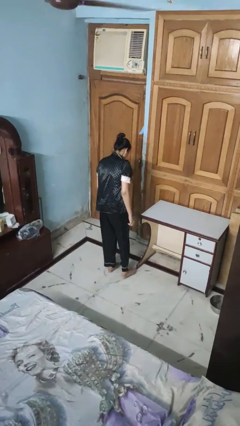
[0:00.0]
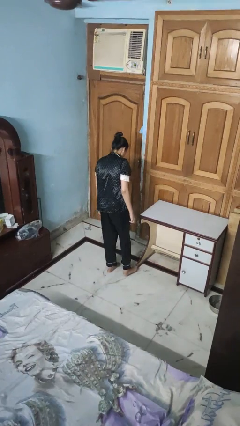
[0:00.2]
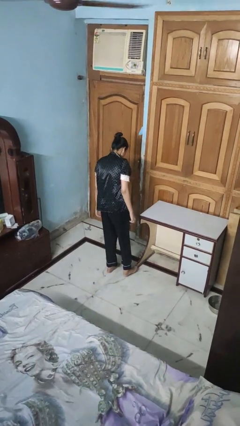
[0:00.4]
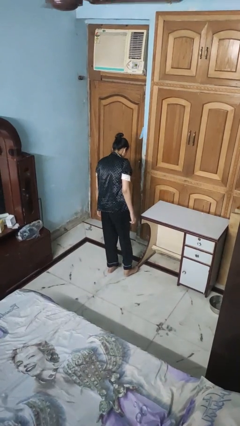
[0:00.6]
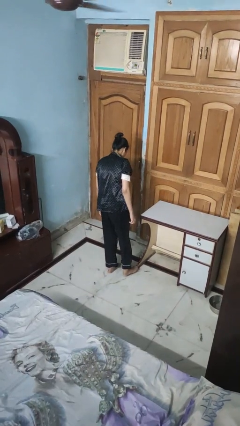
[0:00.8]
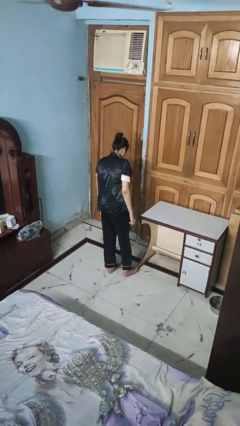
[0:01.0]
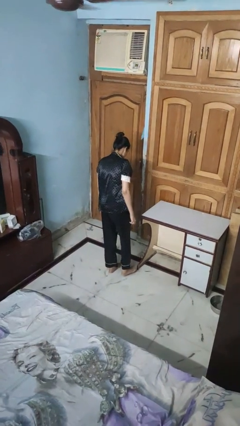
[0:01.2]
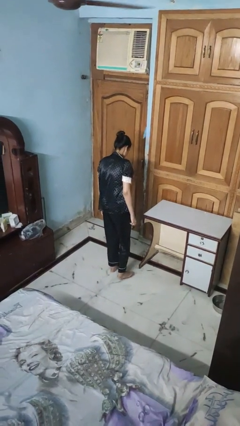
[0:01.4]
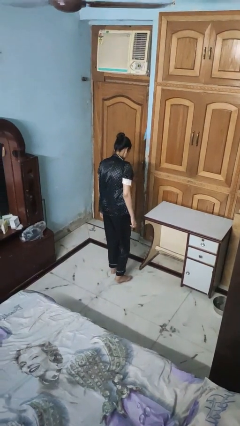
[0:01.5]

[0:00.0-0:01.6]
person stubs toe

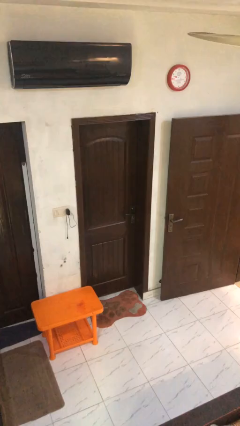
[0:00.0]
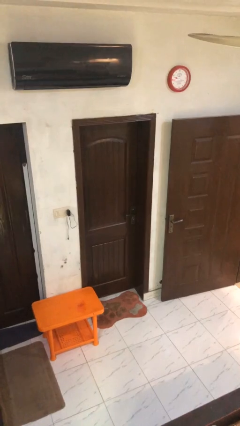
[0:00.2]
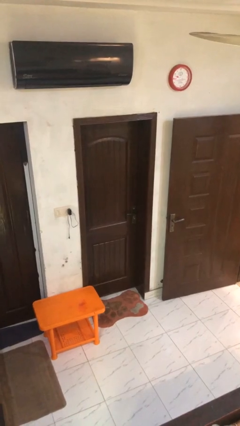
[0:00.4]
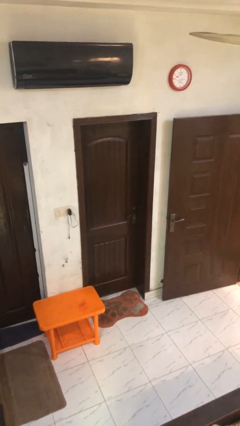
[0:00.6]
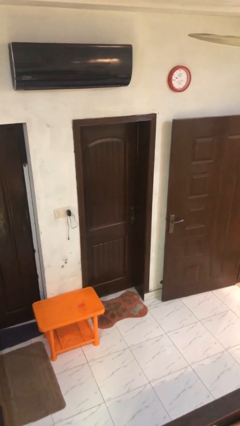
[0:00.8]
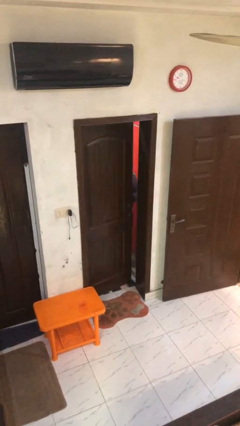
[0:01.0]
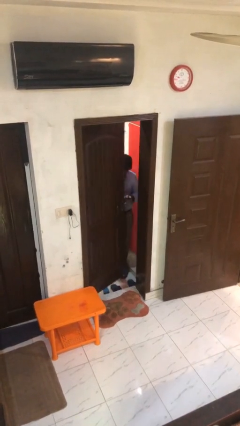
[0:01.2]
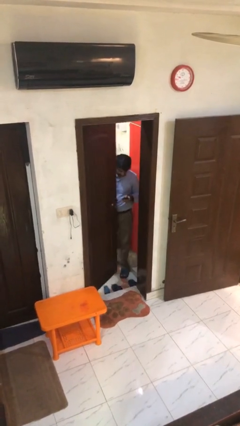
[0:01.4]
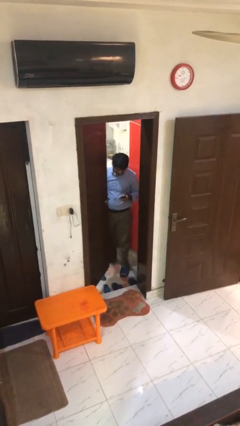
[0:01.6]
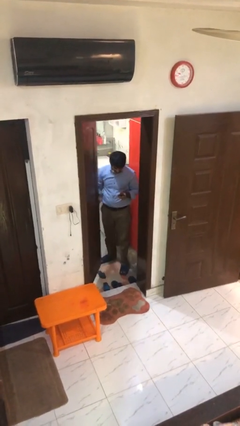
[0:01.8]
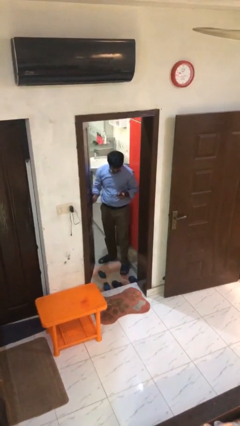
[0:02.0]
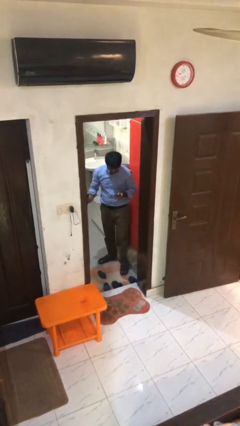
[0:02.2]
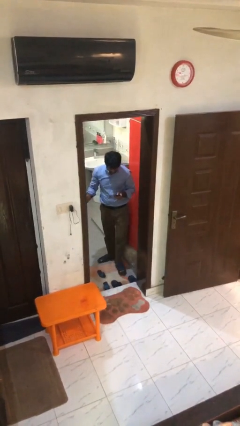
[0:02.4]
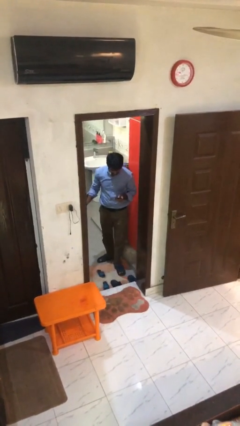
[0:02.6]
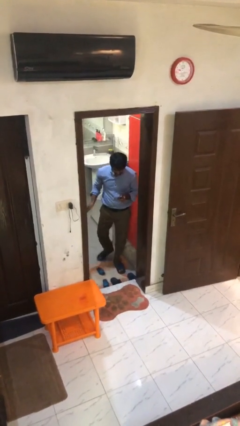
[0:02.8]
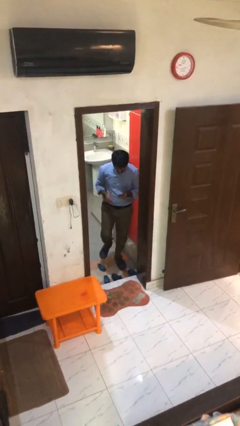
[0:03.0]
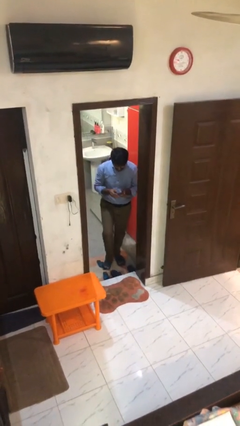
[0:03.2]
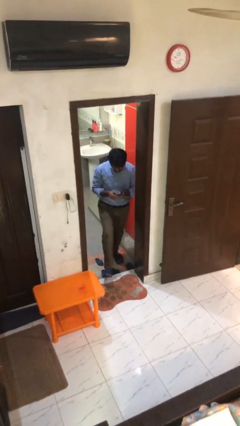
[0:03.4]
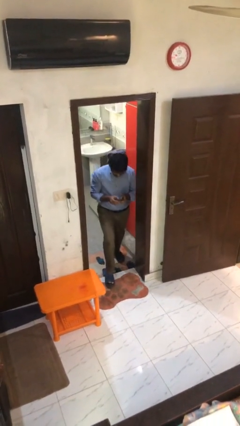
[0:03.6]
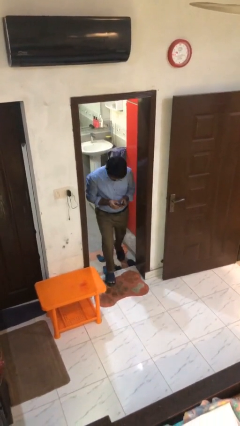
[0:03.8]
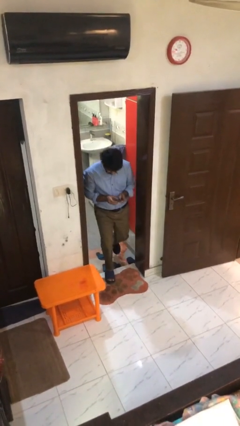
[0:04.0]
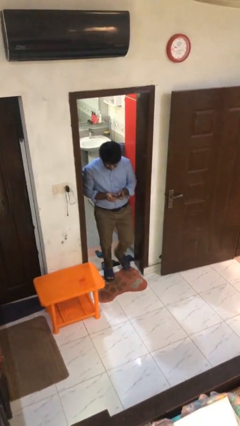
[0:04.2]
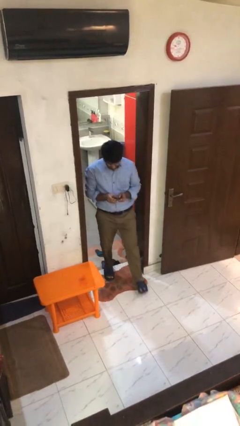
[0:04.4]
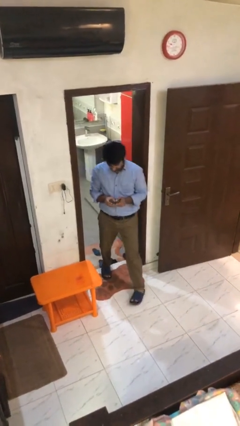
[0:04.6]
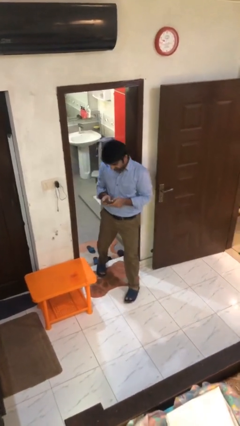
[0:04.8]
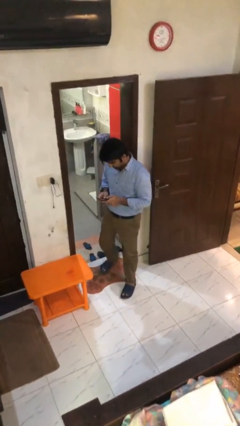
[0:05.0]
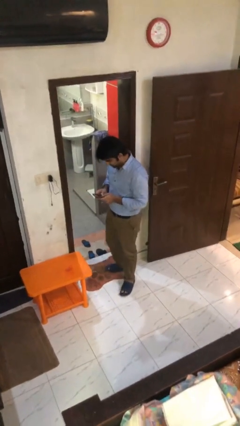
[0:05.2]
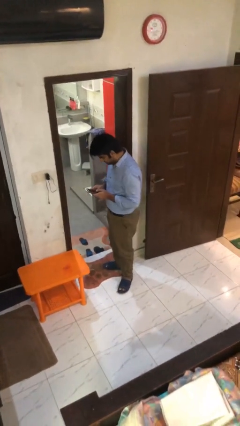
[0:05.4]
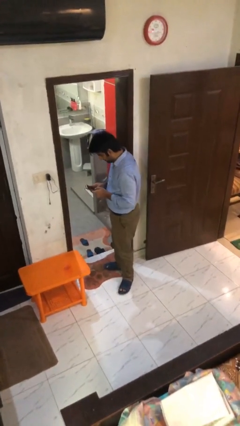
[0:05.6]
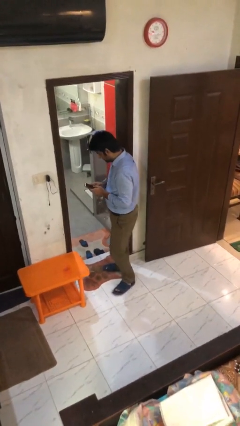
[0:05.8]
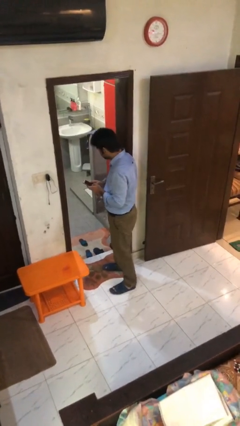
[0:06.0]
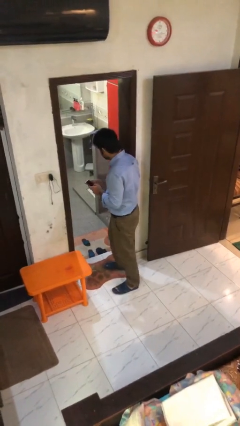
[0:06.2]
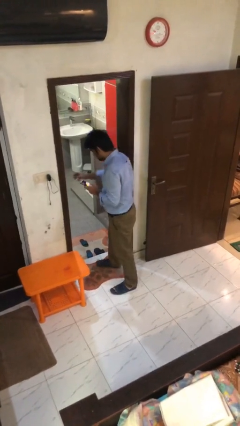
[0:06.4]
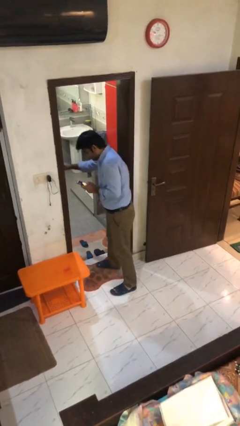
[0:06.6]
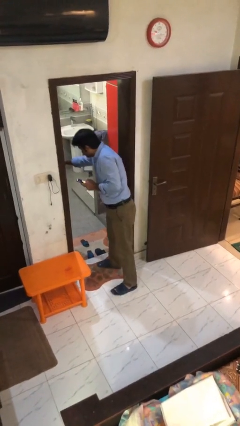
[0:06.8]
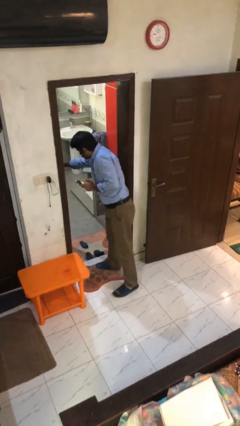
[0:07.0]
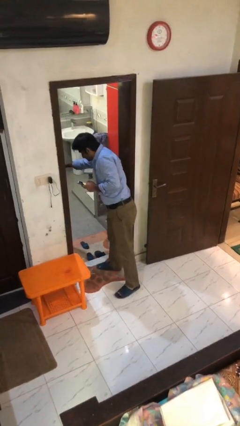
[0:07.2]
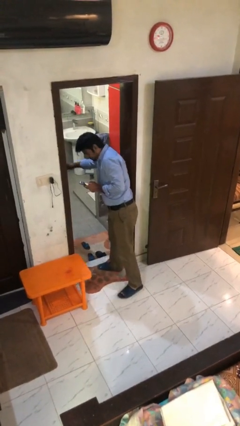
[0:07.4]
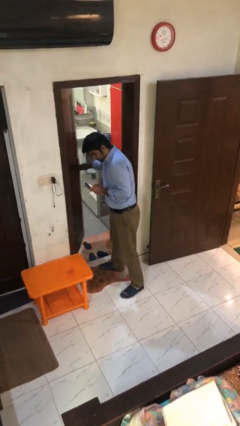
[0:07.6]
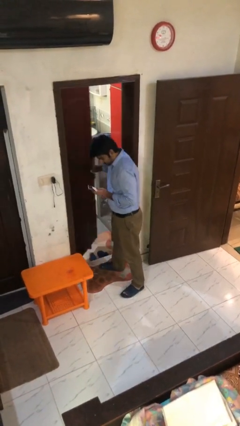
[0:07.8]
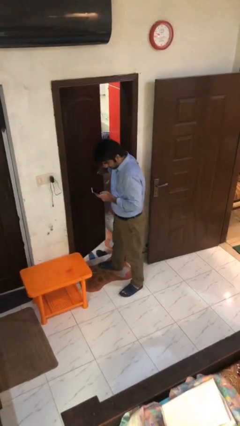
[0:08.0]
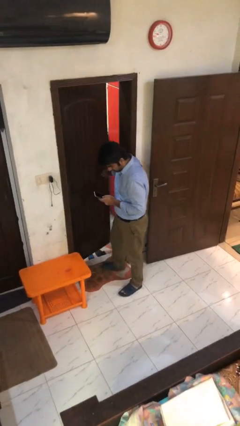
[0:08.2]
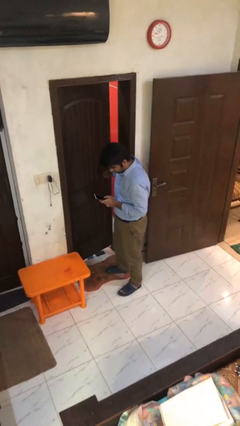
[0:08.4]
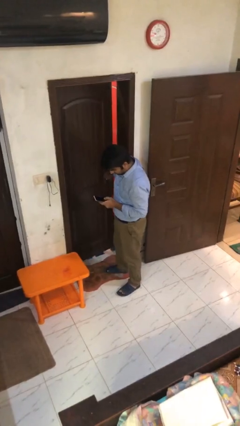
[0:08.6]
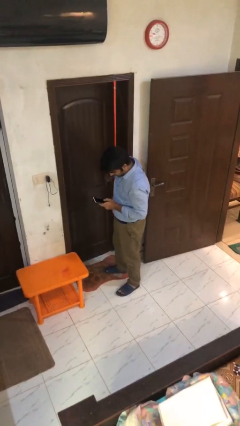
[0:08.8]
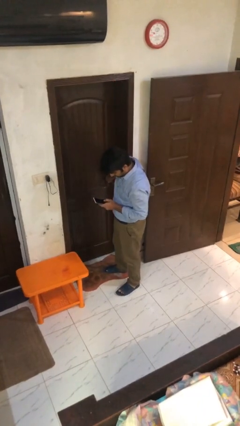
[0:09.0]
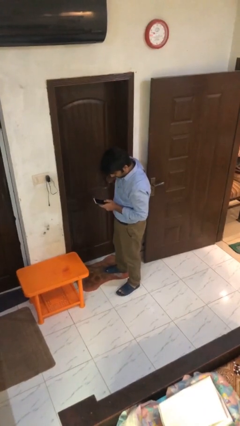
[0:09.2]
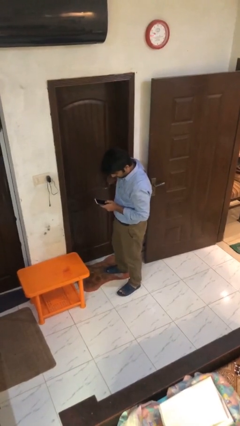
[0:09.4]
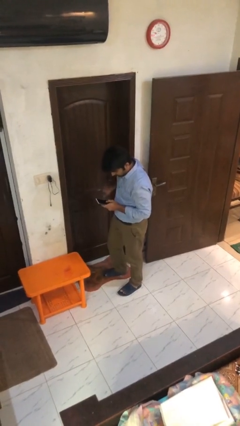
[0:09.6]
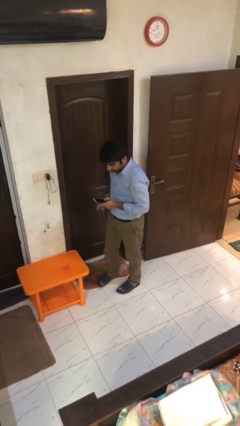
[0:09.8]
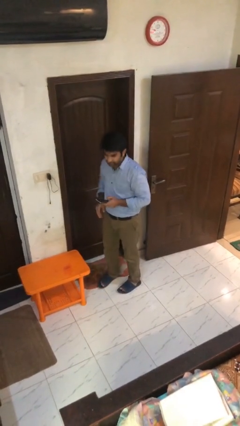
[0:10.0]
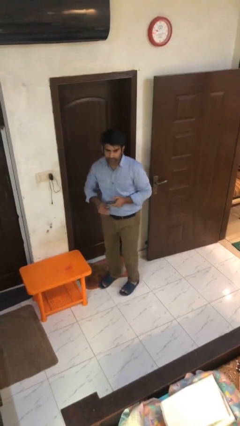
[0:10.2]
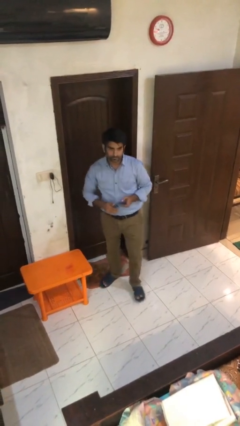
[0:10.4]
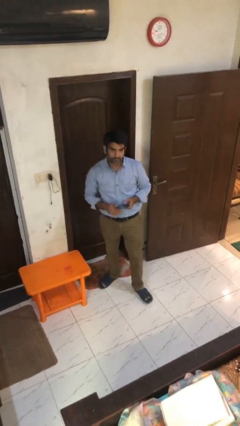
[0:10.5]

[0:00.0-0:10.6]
person texts on phone

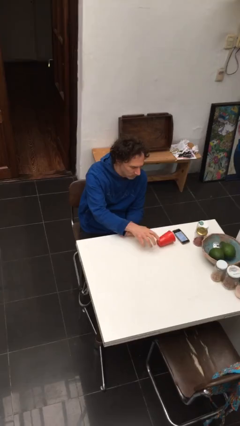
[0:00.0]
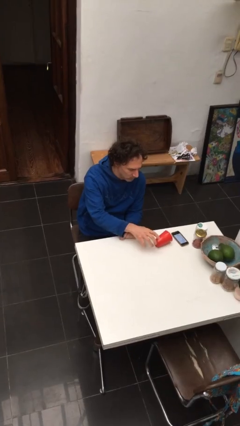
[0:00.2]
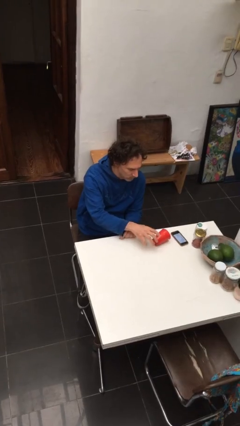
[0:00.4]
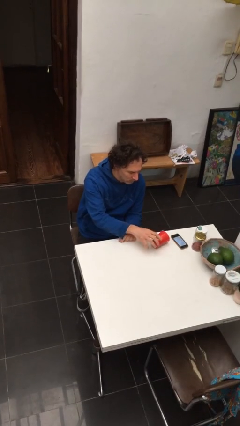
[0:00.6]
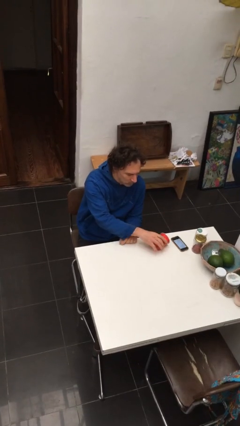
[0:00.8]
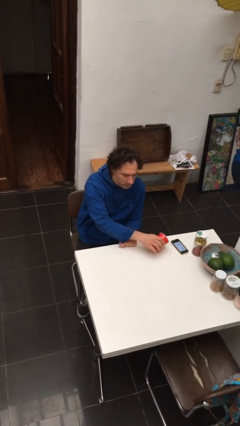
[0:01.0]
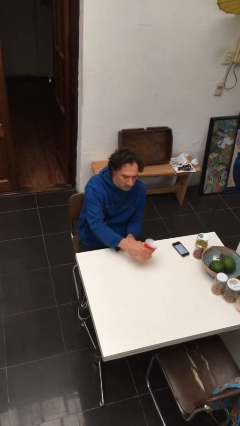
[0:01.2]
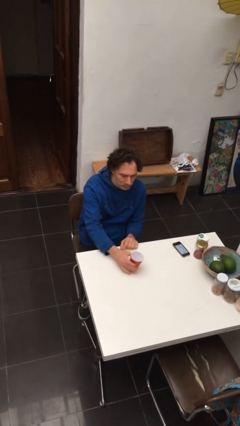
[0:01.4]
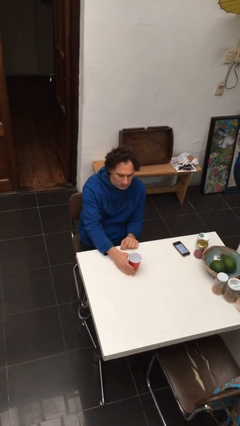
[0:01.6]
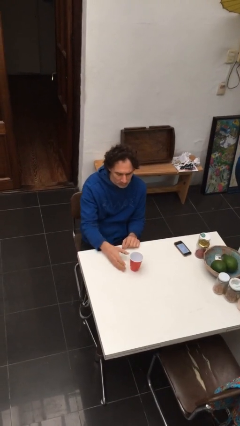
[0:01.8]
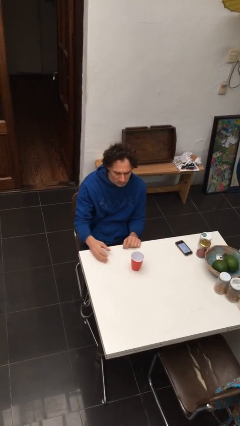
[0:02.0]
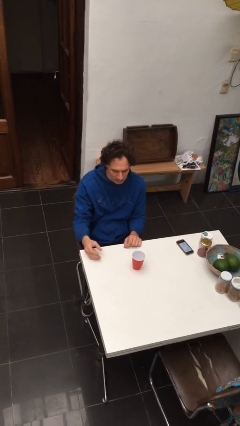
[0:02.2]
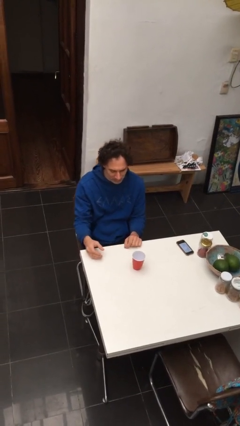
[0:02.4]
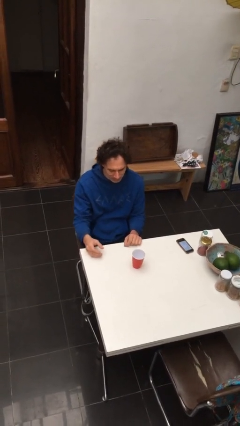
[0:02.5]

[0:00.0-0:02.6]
person sets upright glass

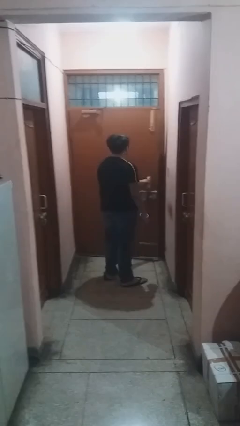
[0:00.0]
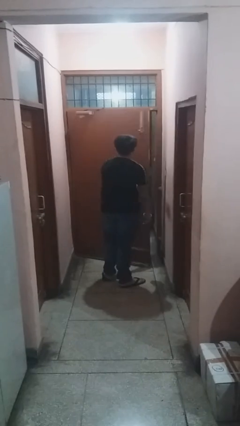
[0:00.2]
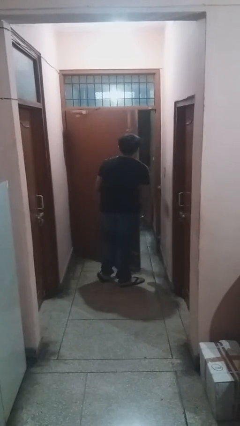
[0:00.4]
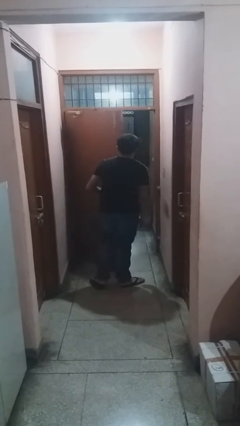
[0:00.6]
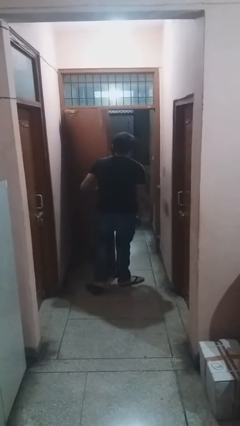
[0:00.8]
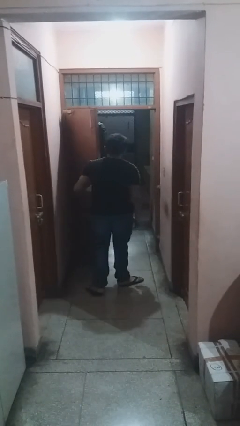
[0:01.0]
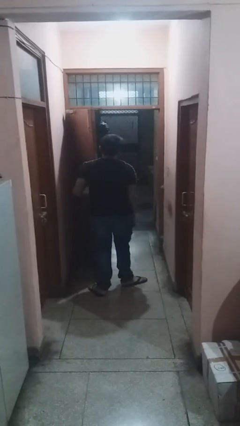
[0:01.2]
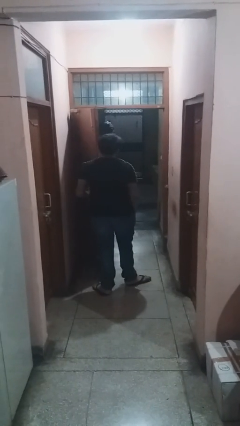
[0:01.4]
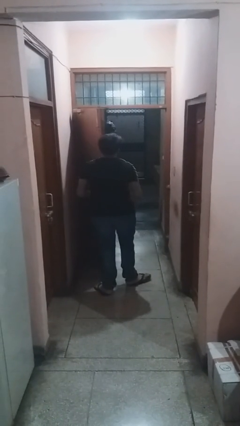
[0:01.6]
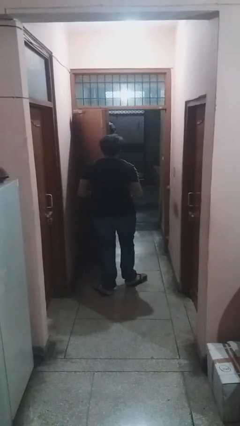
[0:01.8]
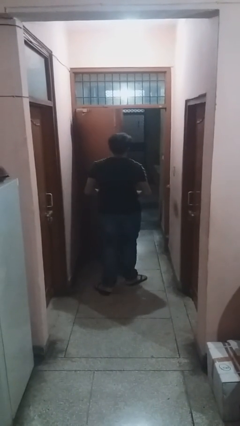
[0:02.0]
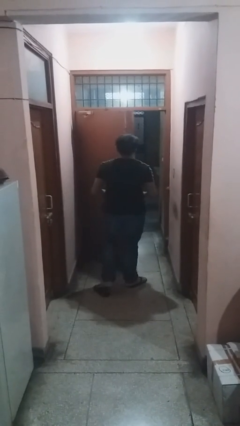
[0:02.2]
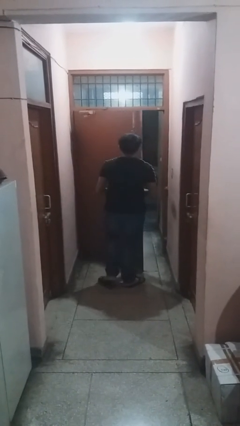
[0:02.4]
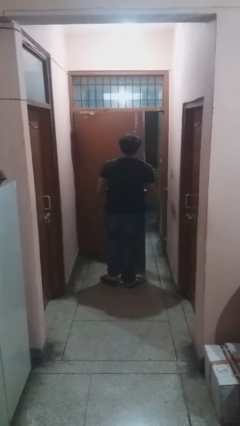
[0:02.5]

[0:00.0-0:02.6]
person opens facility door

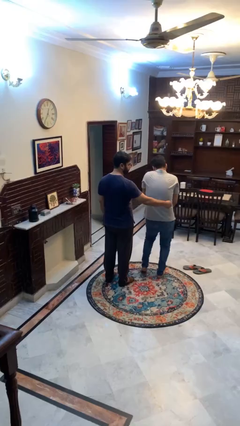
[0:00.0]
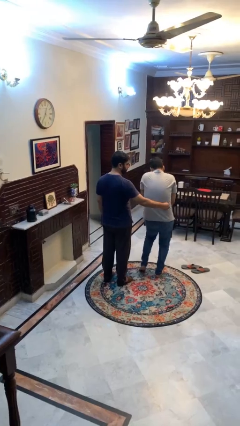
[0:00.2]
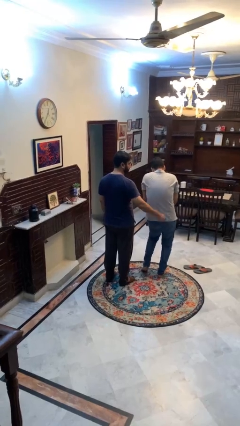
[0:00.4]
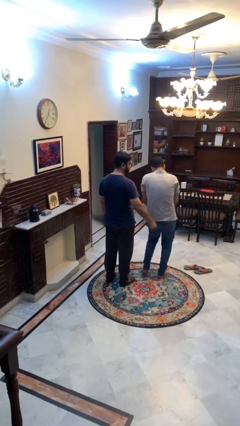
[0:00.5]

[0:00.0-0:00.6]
person tickles person
